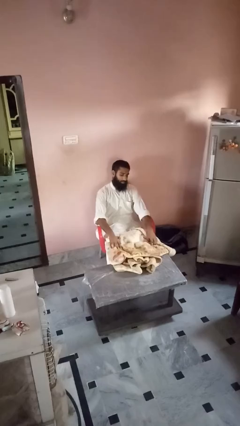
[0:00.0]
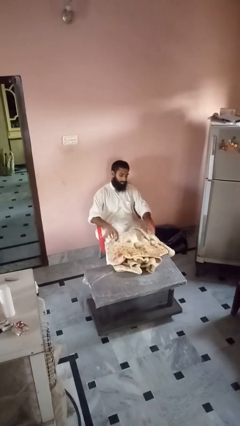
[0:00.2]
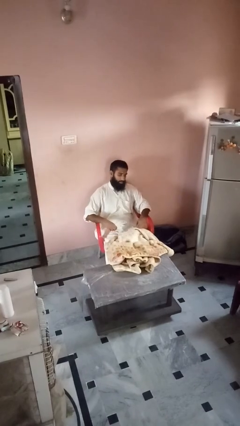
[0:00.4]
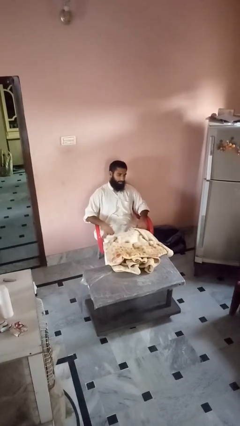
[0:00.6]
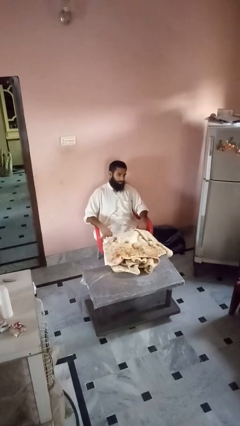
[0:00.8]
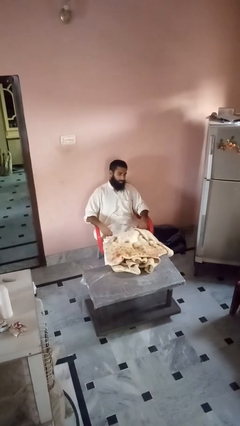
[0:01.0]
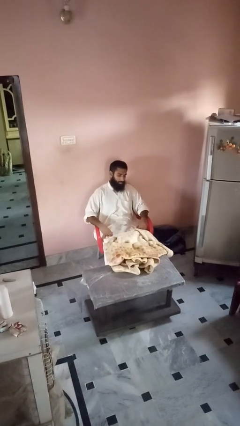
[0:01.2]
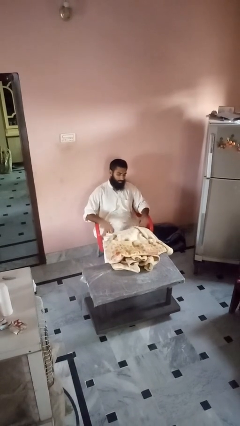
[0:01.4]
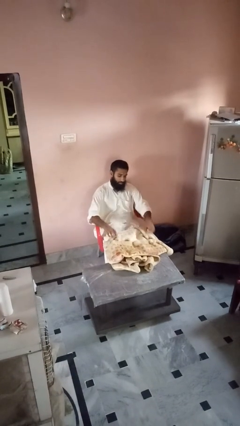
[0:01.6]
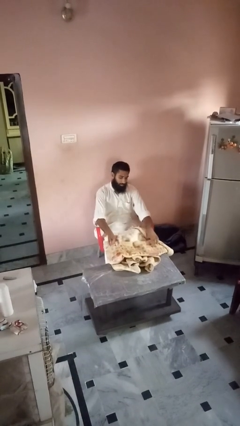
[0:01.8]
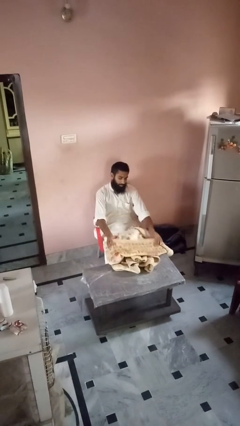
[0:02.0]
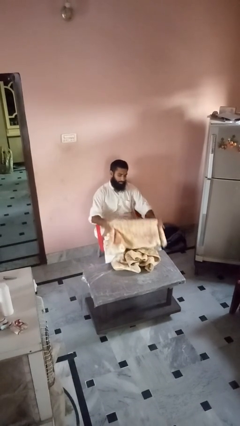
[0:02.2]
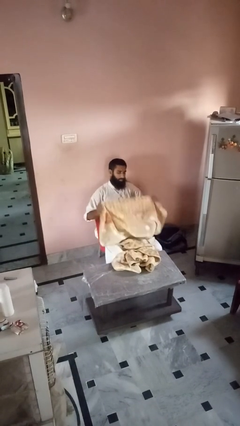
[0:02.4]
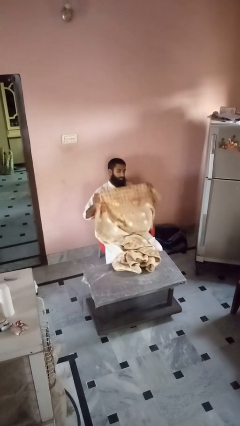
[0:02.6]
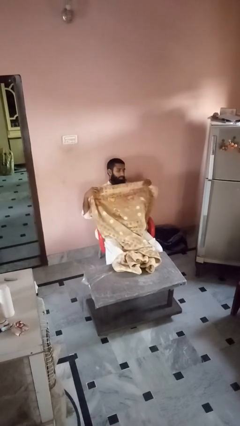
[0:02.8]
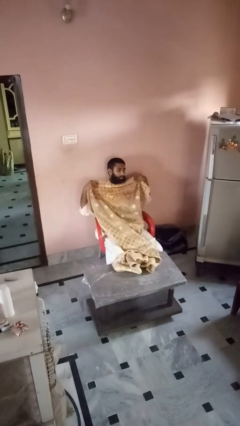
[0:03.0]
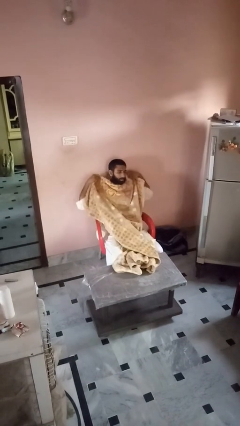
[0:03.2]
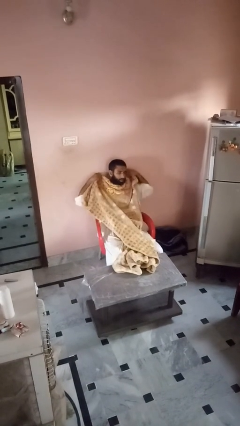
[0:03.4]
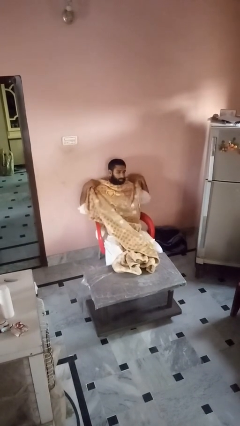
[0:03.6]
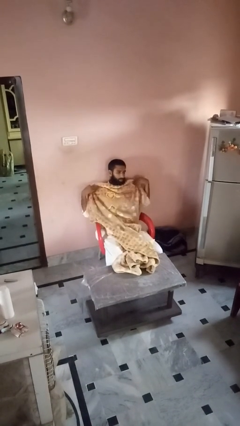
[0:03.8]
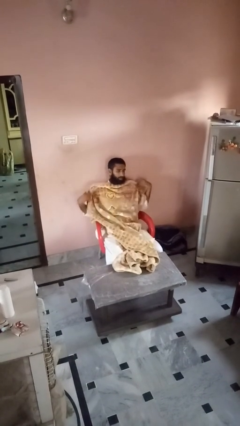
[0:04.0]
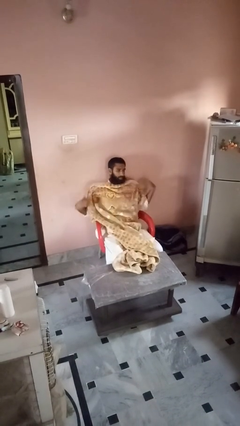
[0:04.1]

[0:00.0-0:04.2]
person covers with blanket

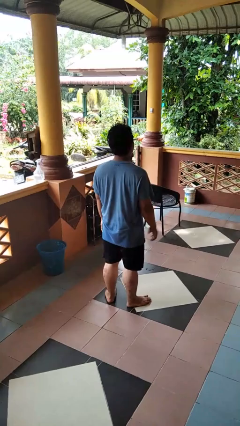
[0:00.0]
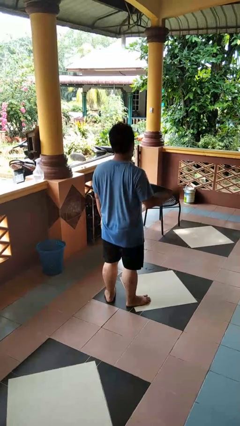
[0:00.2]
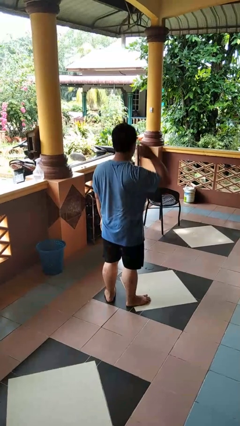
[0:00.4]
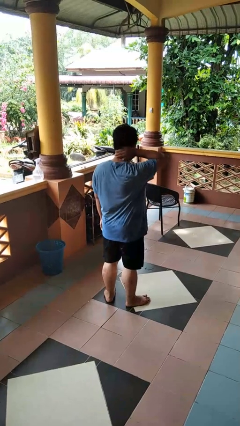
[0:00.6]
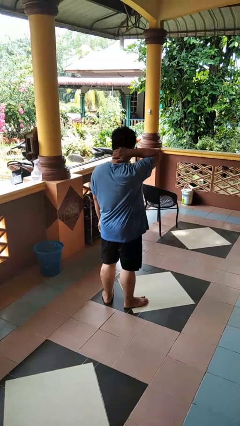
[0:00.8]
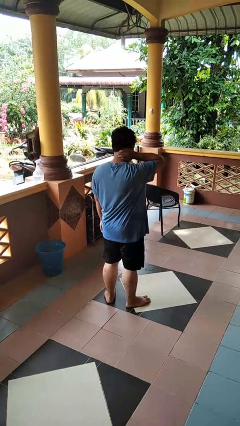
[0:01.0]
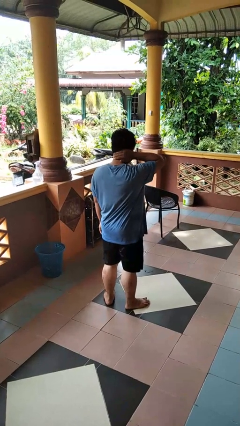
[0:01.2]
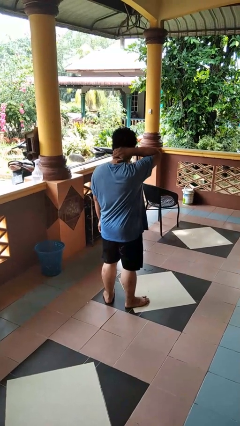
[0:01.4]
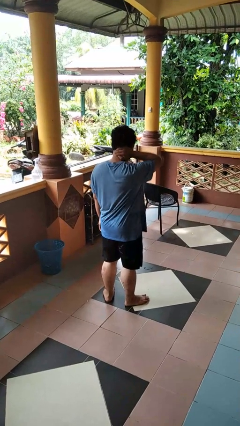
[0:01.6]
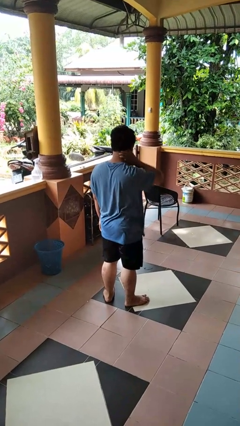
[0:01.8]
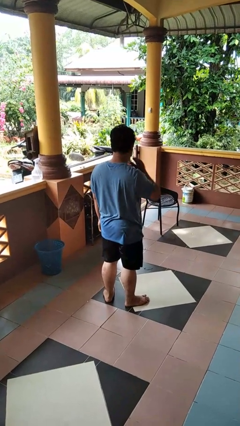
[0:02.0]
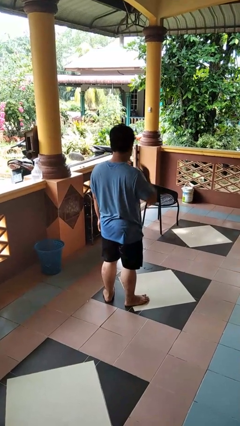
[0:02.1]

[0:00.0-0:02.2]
person rubs neck

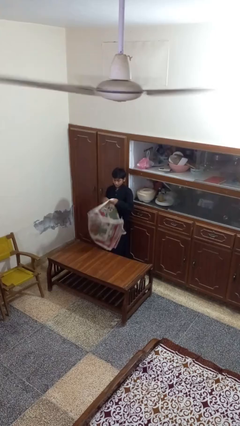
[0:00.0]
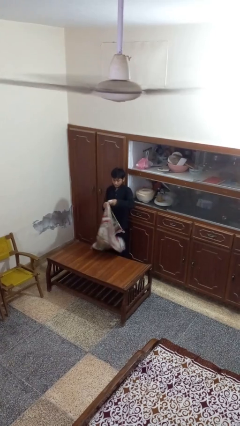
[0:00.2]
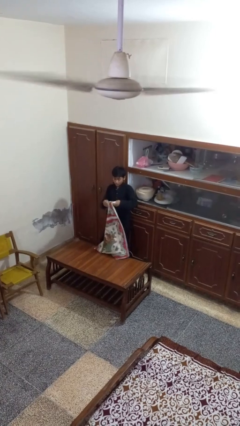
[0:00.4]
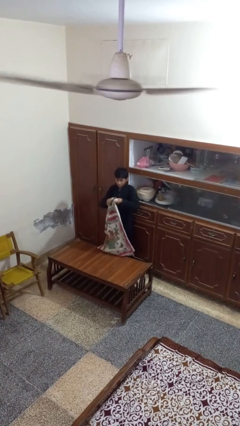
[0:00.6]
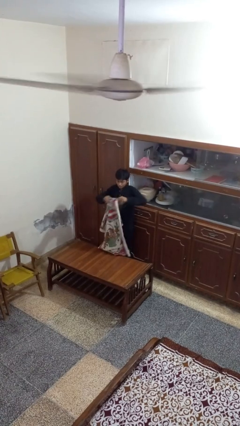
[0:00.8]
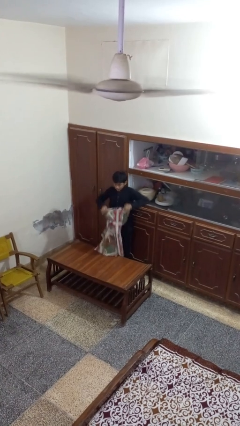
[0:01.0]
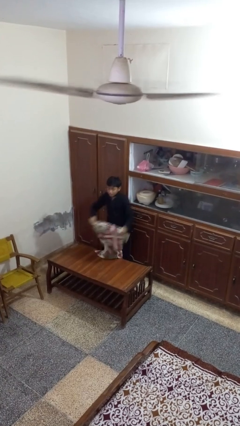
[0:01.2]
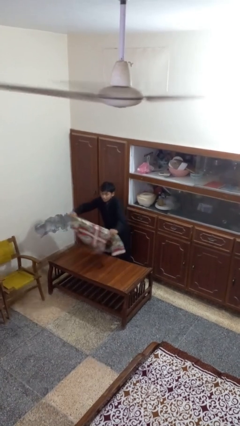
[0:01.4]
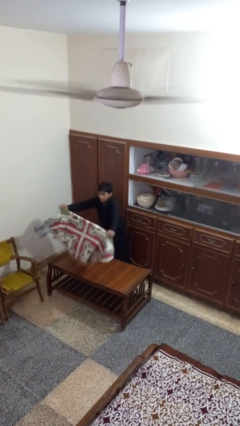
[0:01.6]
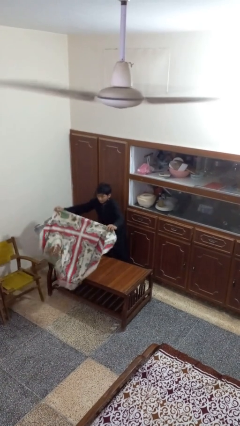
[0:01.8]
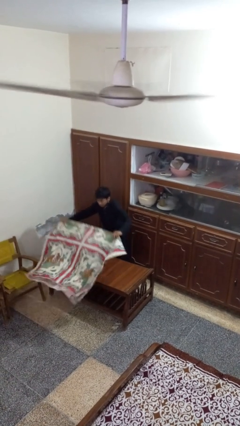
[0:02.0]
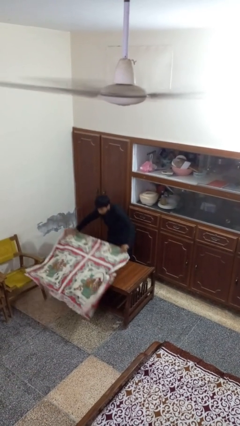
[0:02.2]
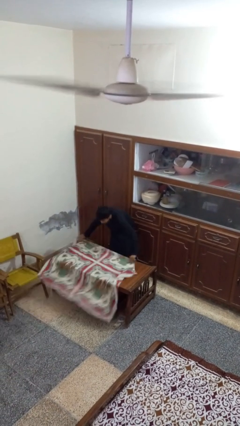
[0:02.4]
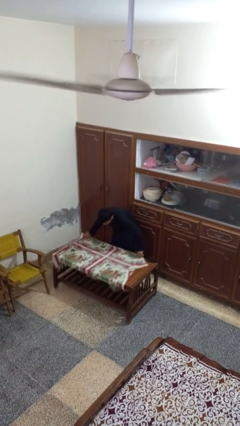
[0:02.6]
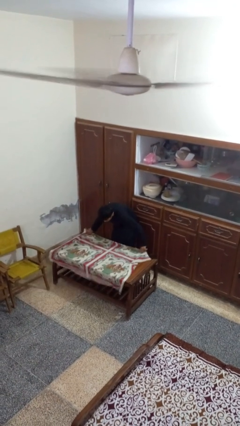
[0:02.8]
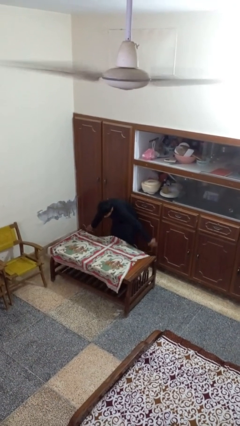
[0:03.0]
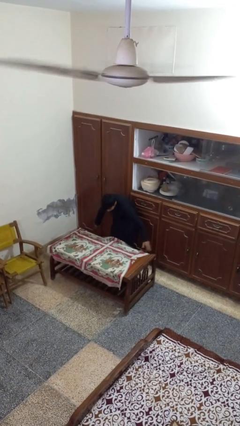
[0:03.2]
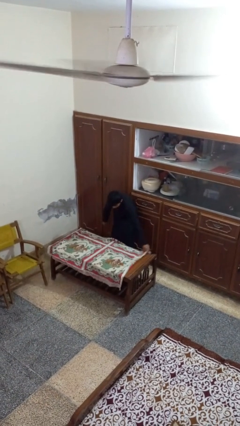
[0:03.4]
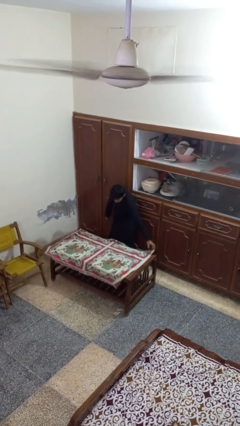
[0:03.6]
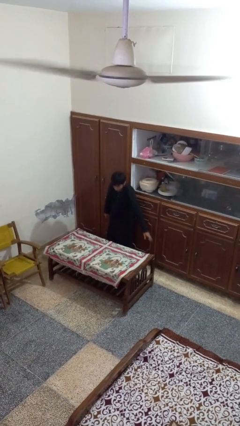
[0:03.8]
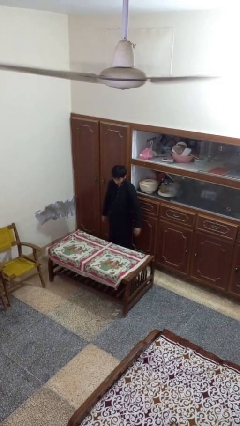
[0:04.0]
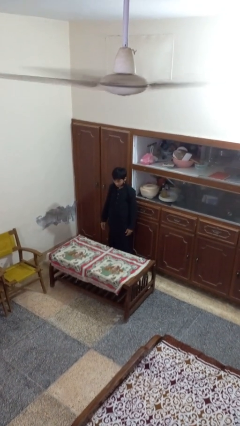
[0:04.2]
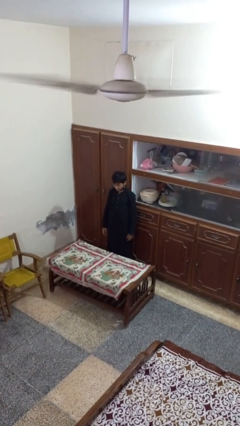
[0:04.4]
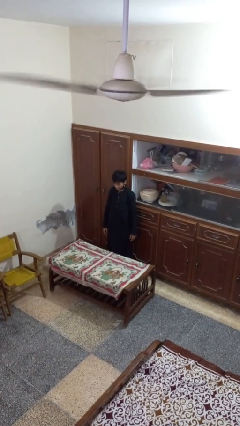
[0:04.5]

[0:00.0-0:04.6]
person spreads tablecloth

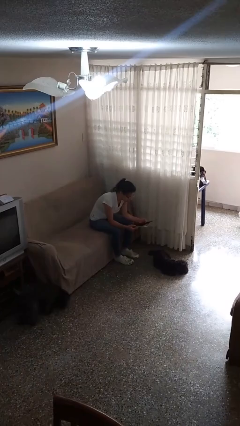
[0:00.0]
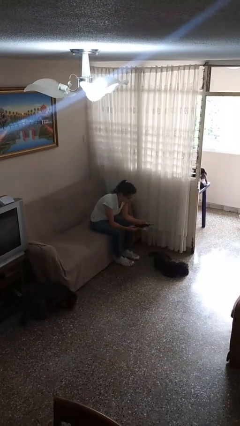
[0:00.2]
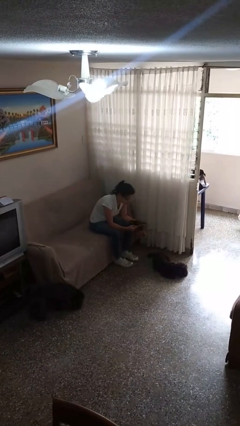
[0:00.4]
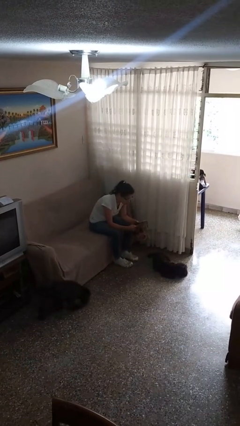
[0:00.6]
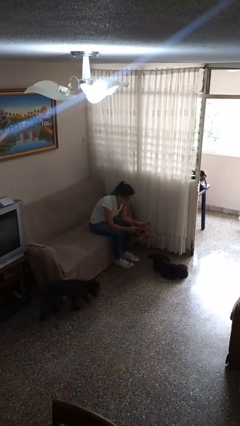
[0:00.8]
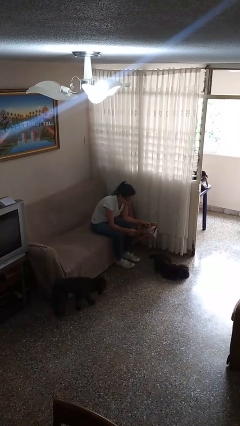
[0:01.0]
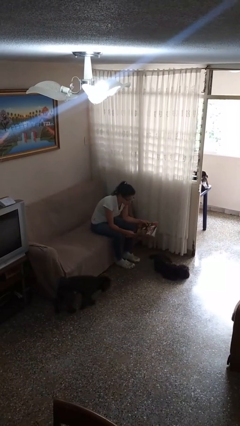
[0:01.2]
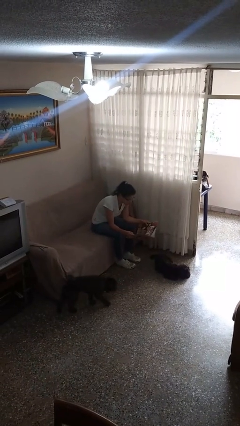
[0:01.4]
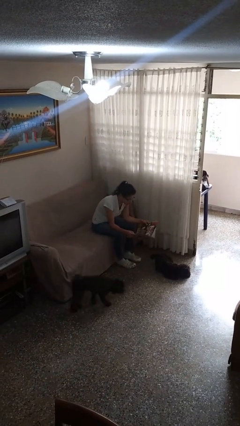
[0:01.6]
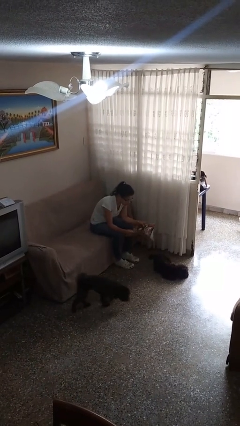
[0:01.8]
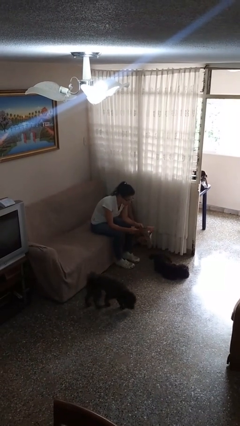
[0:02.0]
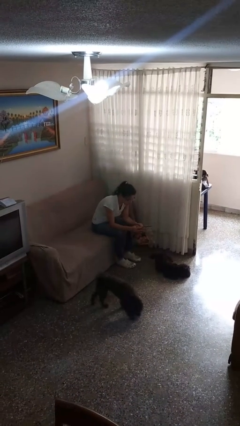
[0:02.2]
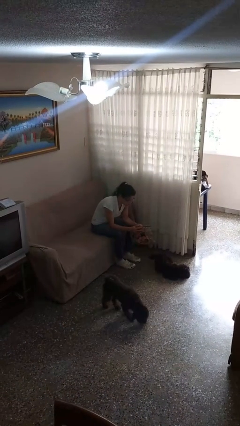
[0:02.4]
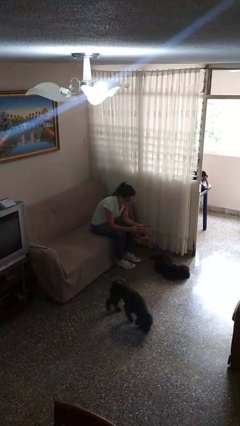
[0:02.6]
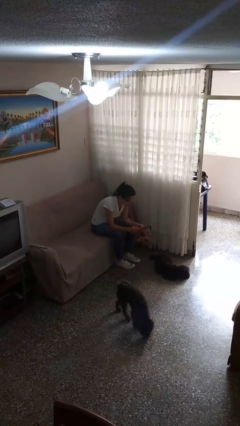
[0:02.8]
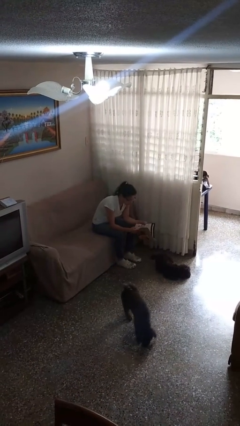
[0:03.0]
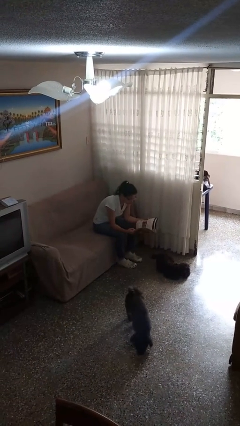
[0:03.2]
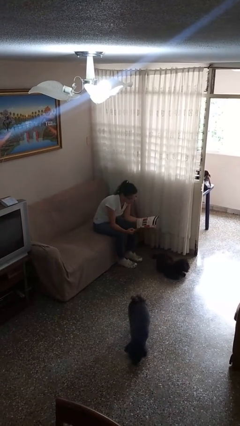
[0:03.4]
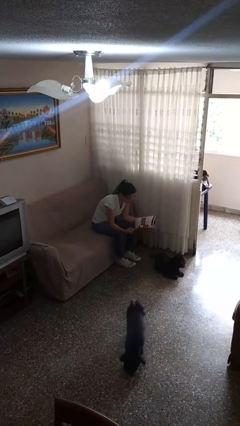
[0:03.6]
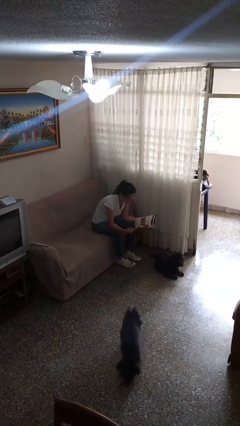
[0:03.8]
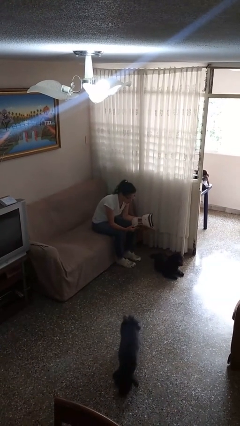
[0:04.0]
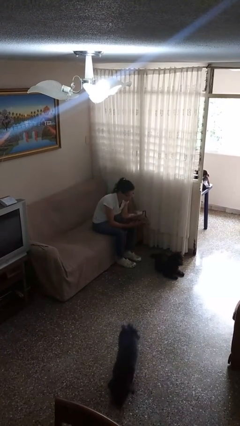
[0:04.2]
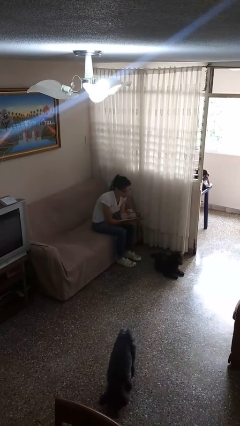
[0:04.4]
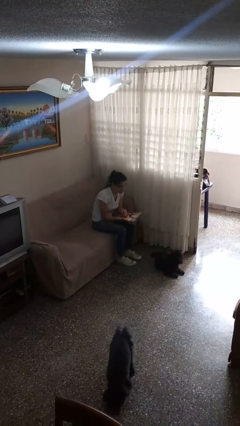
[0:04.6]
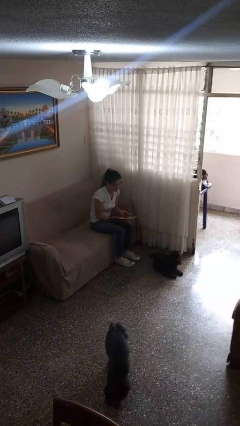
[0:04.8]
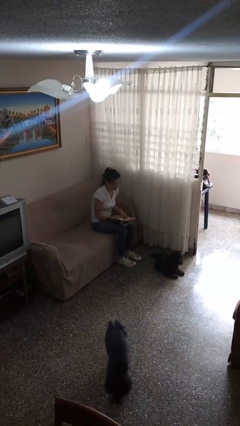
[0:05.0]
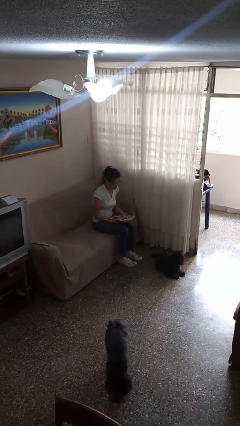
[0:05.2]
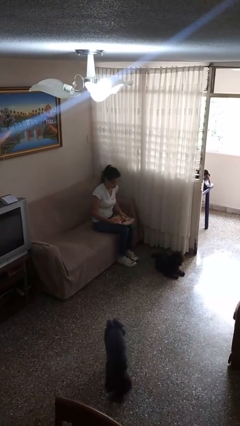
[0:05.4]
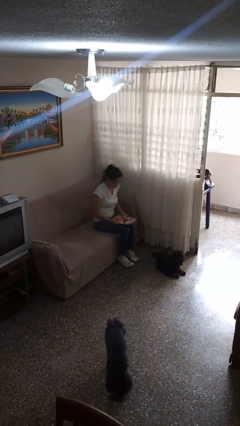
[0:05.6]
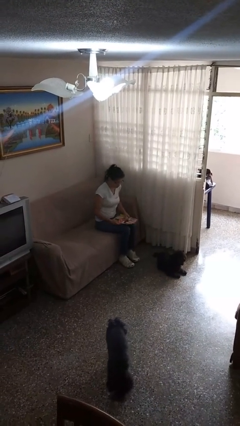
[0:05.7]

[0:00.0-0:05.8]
person reads magazine

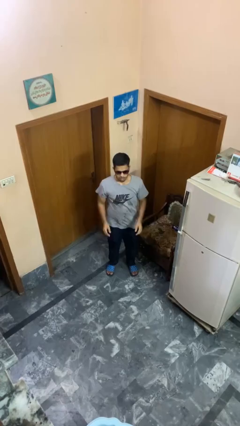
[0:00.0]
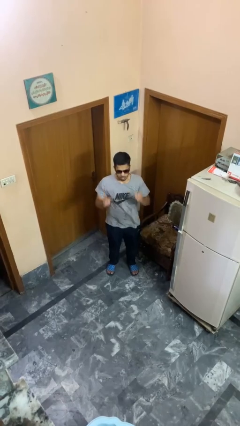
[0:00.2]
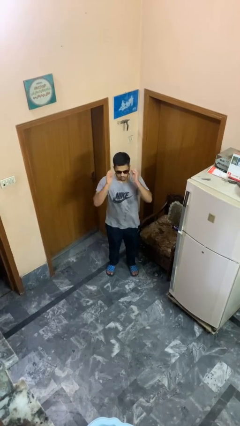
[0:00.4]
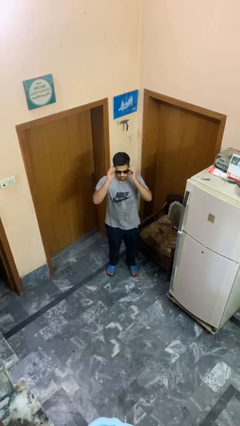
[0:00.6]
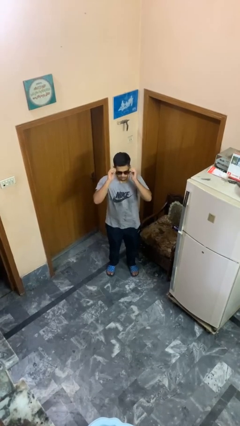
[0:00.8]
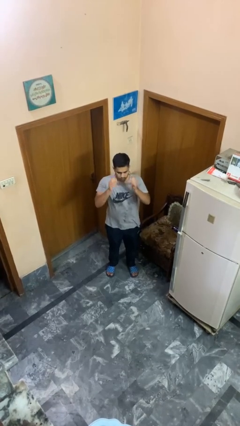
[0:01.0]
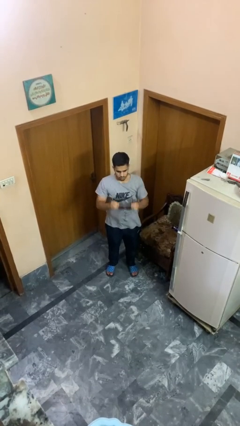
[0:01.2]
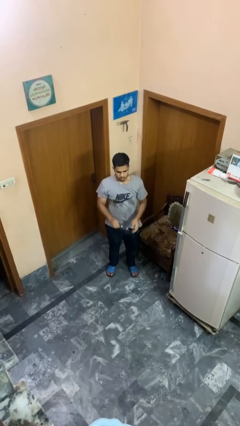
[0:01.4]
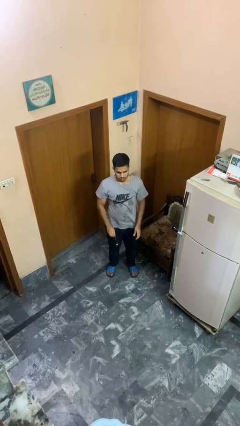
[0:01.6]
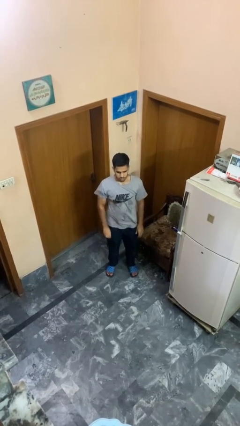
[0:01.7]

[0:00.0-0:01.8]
person takes off sunglasses
